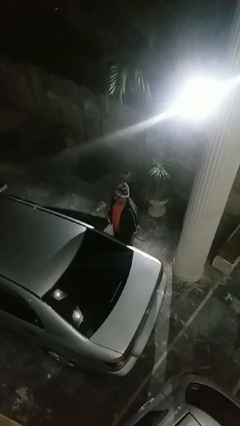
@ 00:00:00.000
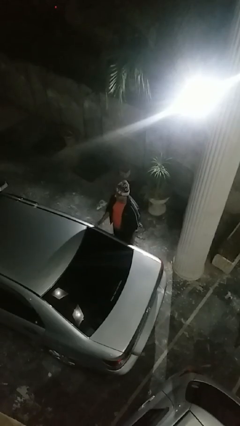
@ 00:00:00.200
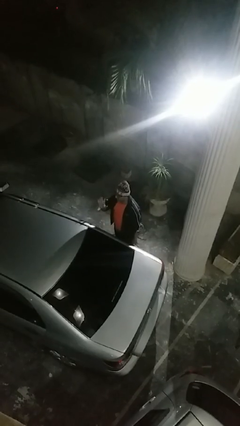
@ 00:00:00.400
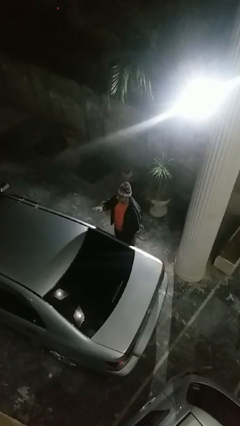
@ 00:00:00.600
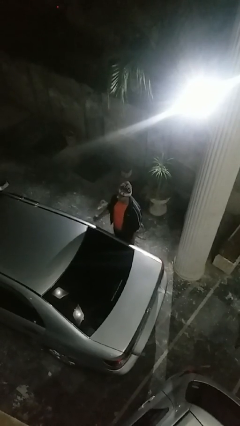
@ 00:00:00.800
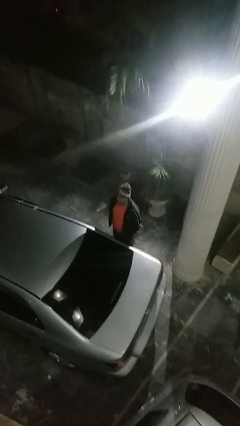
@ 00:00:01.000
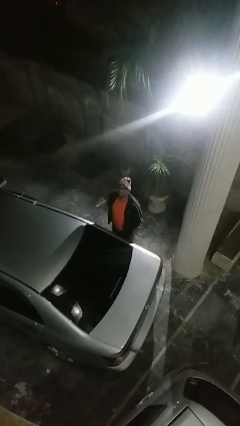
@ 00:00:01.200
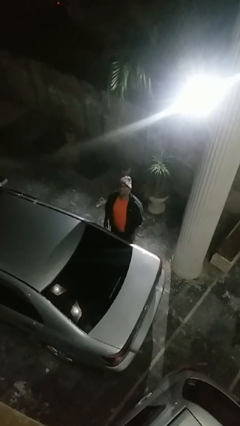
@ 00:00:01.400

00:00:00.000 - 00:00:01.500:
person closes car door

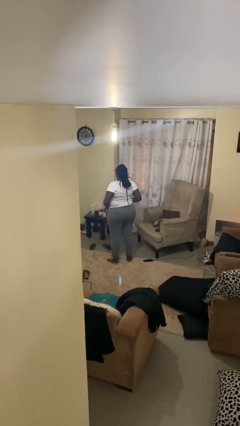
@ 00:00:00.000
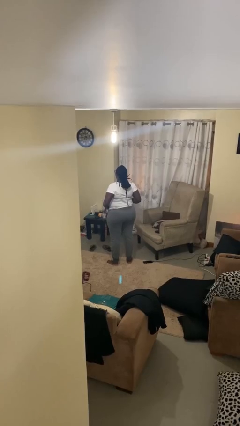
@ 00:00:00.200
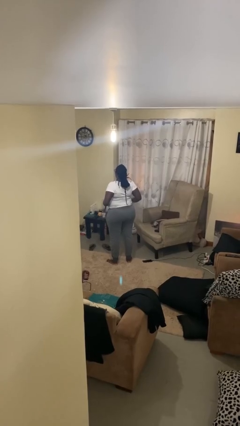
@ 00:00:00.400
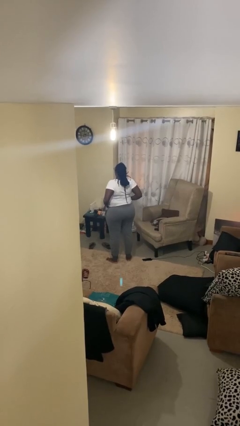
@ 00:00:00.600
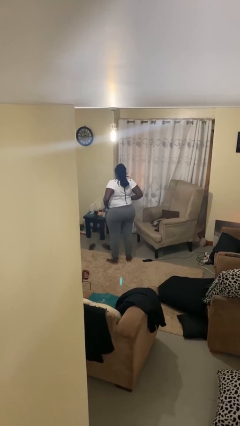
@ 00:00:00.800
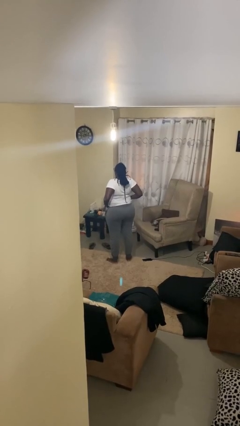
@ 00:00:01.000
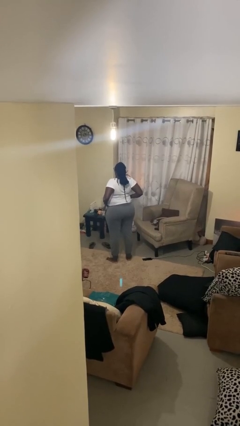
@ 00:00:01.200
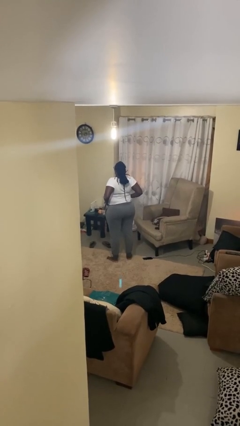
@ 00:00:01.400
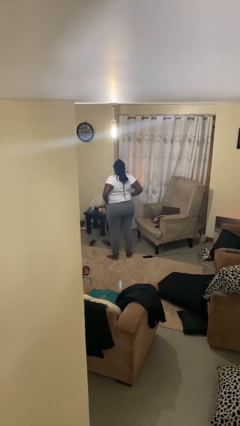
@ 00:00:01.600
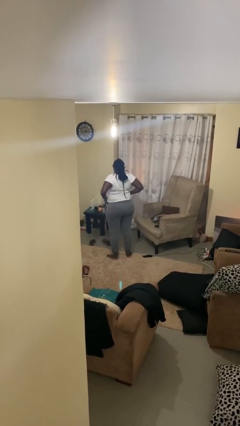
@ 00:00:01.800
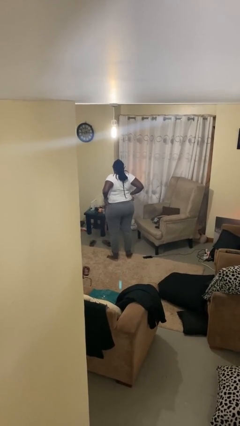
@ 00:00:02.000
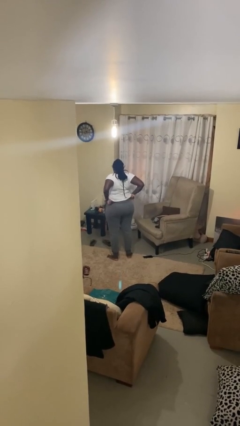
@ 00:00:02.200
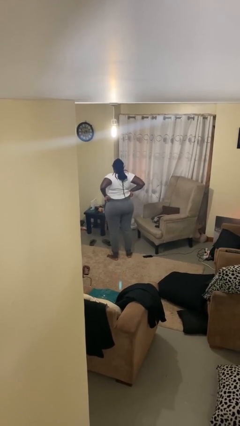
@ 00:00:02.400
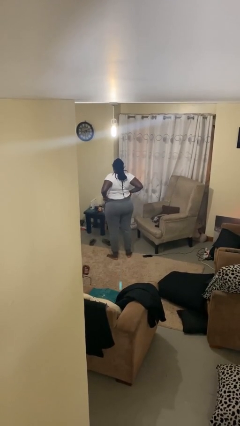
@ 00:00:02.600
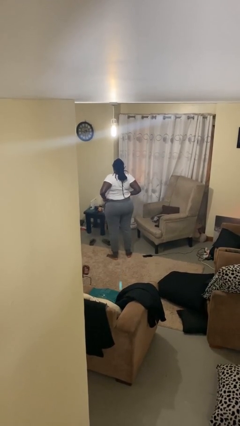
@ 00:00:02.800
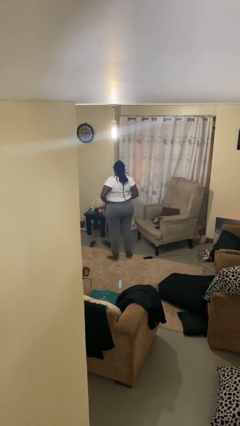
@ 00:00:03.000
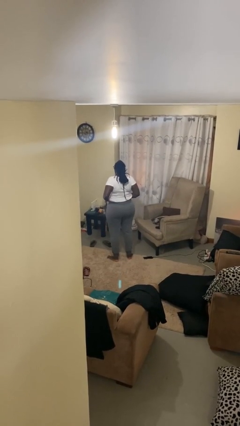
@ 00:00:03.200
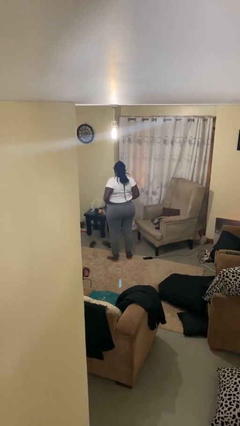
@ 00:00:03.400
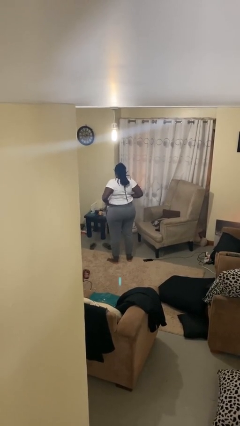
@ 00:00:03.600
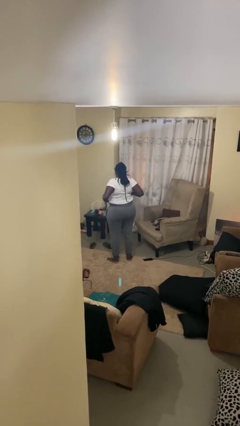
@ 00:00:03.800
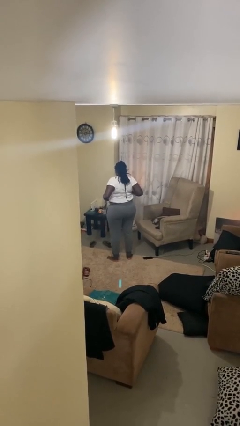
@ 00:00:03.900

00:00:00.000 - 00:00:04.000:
person hikes up pants

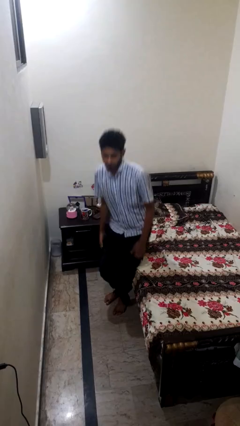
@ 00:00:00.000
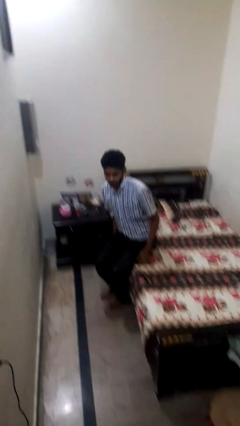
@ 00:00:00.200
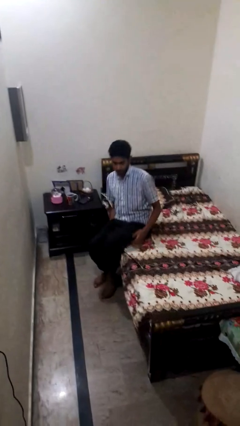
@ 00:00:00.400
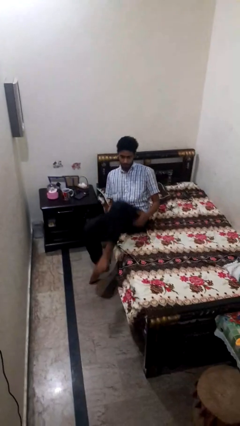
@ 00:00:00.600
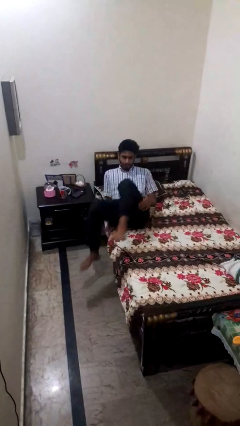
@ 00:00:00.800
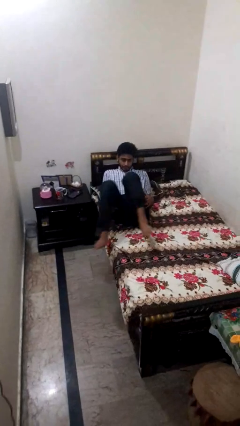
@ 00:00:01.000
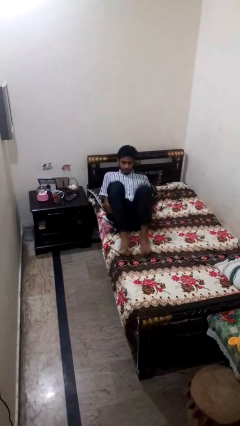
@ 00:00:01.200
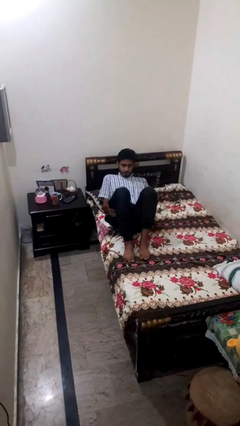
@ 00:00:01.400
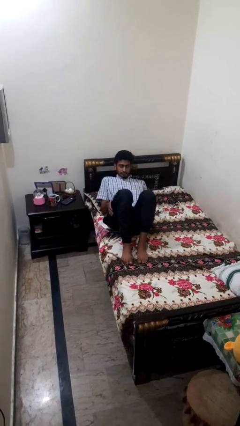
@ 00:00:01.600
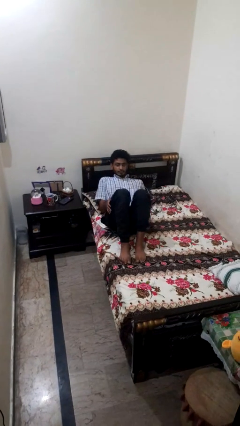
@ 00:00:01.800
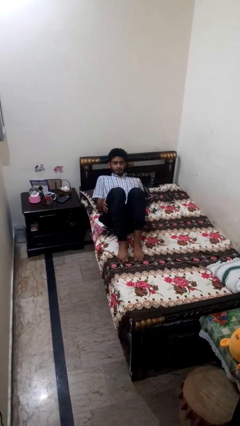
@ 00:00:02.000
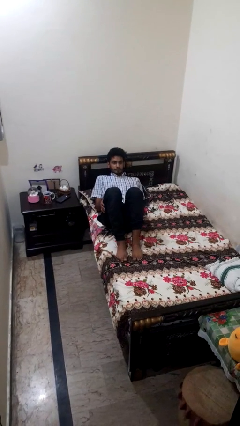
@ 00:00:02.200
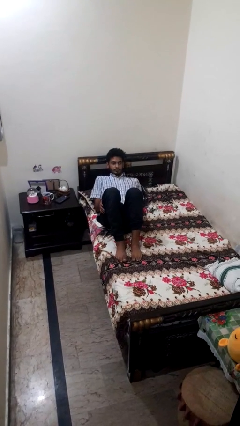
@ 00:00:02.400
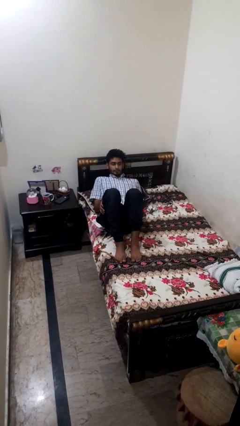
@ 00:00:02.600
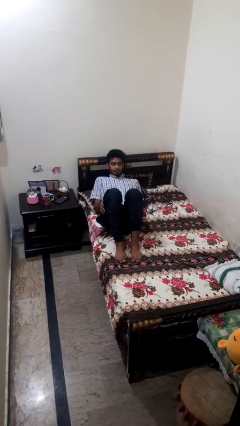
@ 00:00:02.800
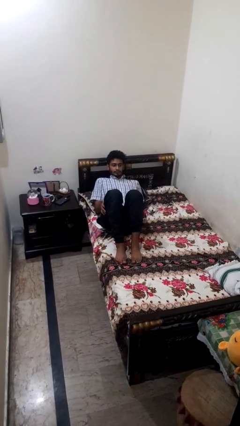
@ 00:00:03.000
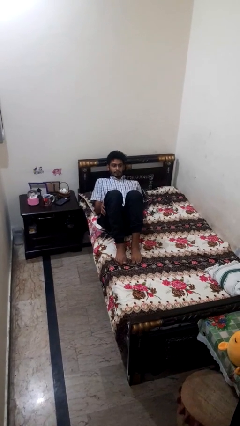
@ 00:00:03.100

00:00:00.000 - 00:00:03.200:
person lies down on bed

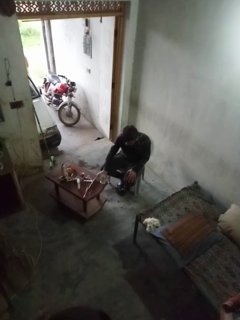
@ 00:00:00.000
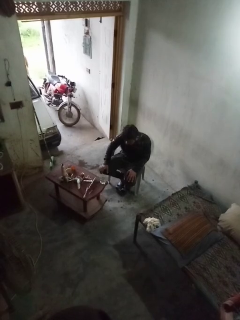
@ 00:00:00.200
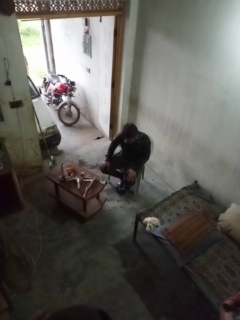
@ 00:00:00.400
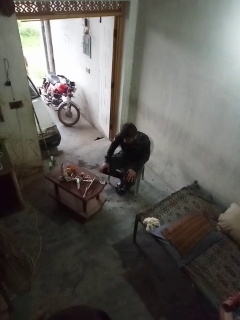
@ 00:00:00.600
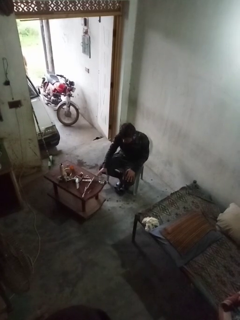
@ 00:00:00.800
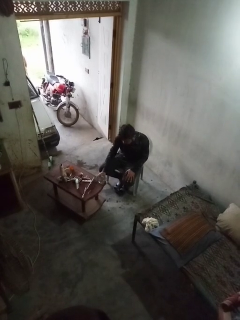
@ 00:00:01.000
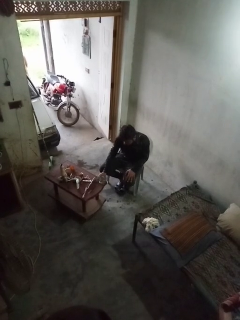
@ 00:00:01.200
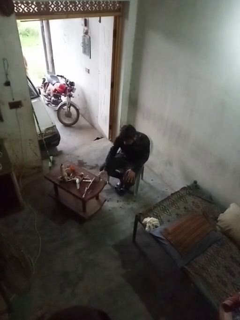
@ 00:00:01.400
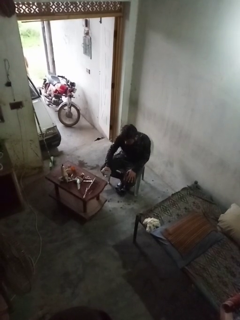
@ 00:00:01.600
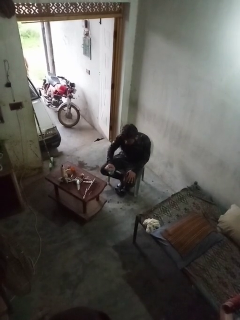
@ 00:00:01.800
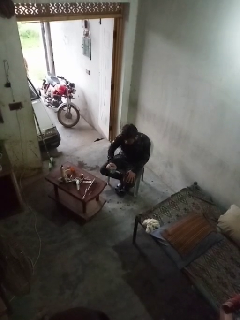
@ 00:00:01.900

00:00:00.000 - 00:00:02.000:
person picks up object from table

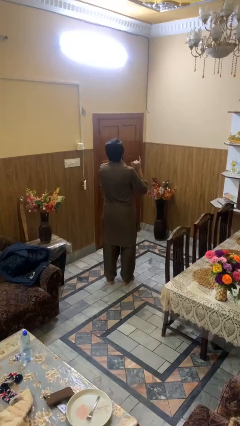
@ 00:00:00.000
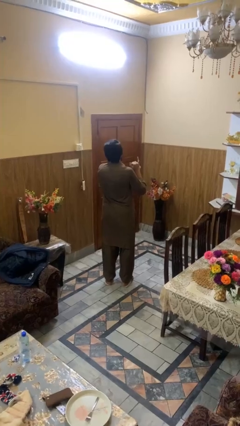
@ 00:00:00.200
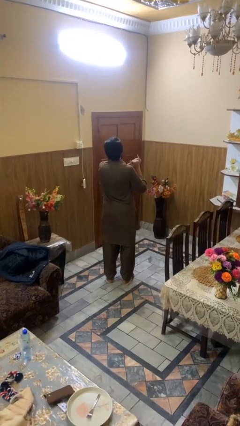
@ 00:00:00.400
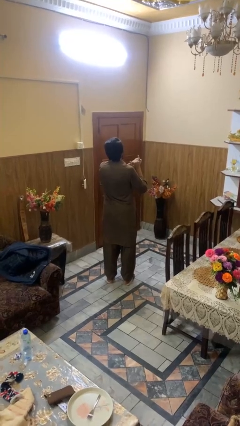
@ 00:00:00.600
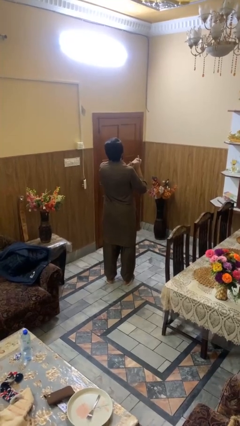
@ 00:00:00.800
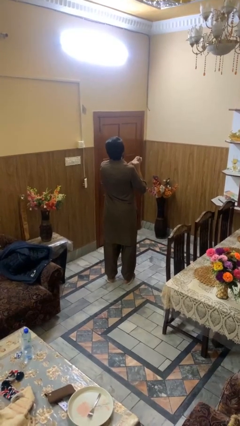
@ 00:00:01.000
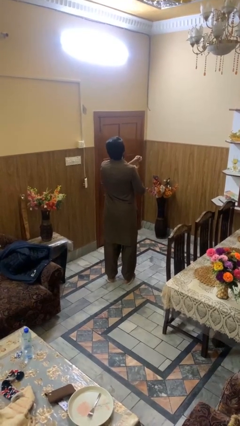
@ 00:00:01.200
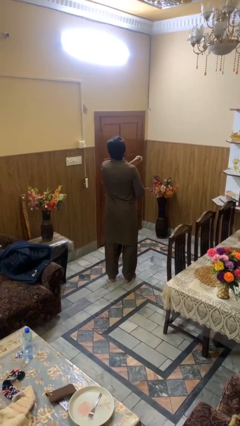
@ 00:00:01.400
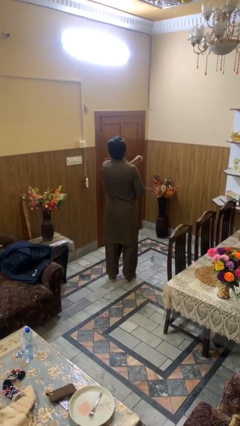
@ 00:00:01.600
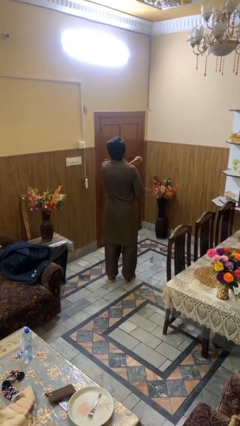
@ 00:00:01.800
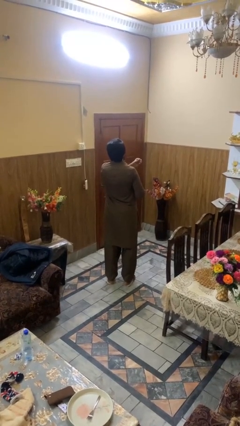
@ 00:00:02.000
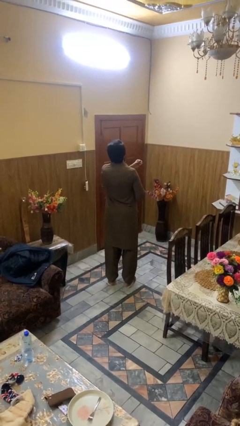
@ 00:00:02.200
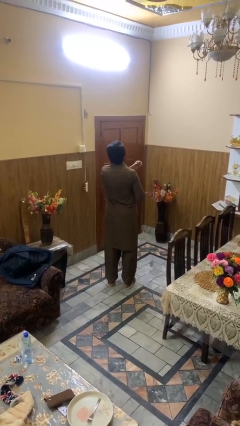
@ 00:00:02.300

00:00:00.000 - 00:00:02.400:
person takes off ring

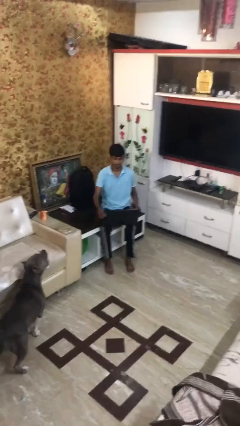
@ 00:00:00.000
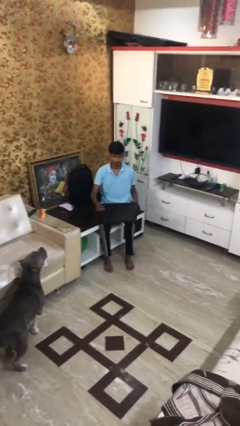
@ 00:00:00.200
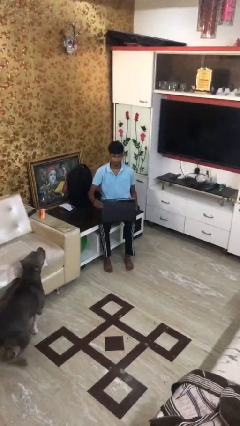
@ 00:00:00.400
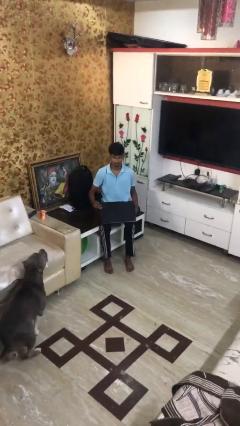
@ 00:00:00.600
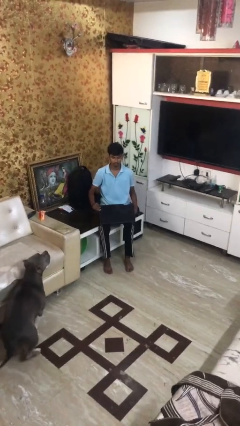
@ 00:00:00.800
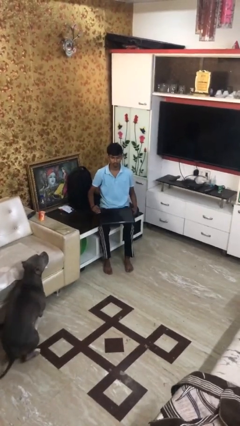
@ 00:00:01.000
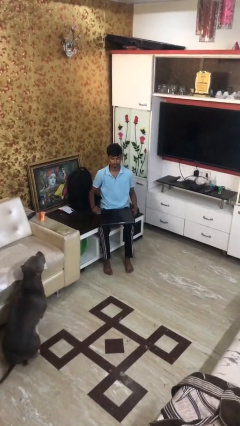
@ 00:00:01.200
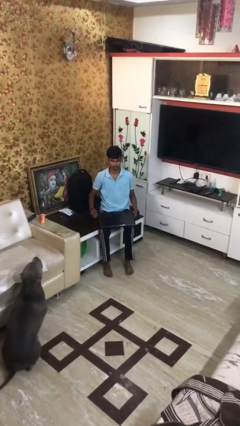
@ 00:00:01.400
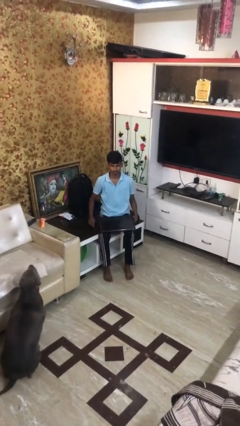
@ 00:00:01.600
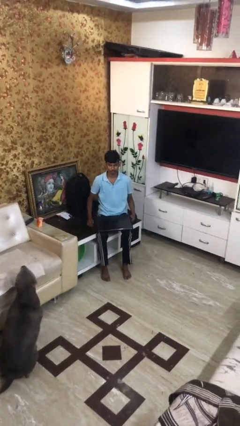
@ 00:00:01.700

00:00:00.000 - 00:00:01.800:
person closes laptop

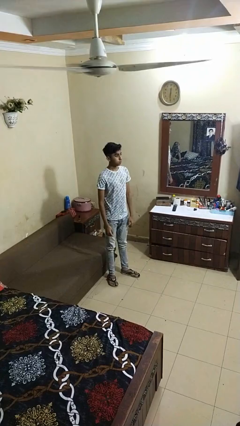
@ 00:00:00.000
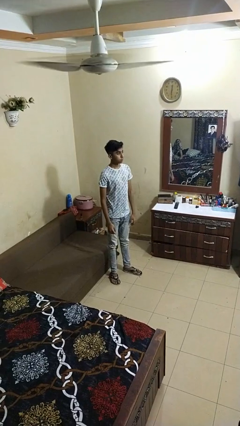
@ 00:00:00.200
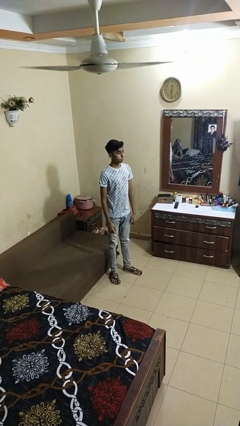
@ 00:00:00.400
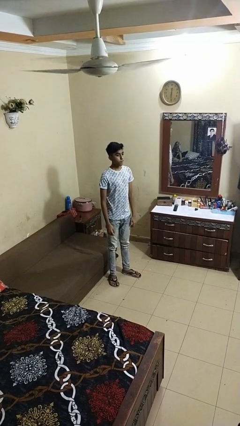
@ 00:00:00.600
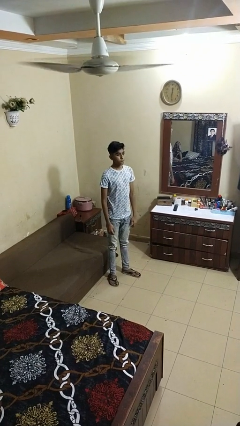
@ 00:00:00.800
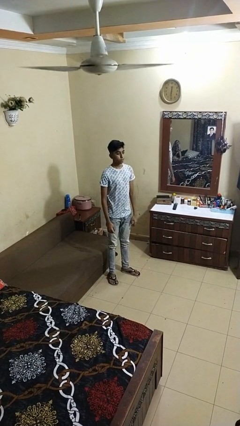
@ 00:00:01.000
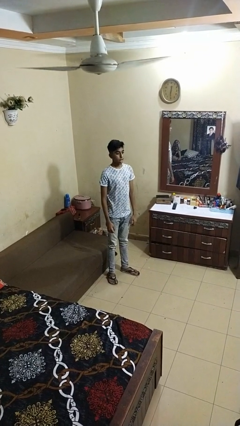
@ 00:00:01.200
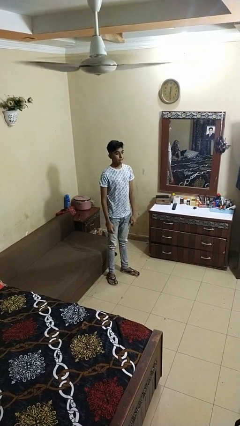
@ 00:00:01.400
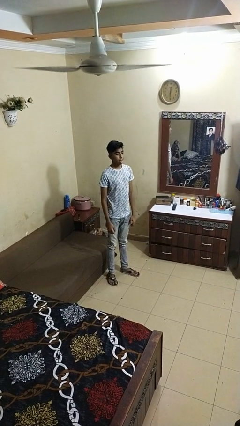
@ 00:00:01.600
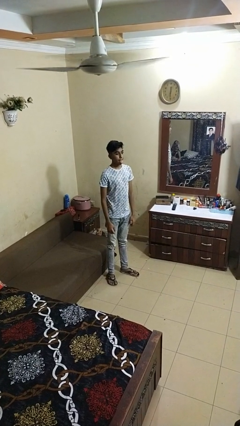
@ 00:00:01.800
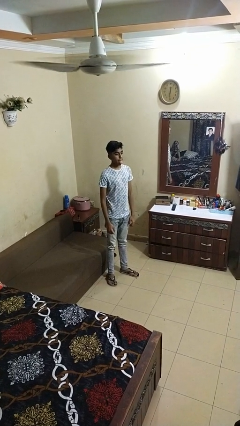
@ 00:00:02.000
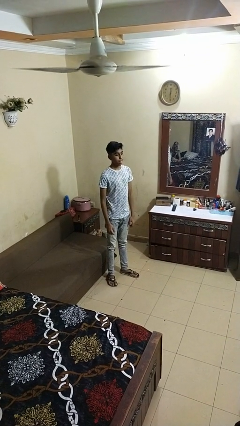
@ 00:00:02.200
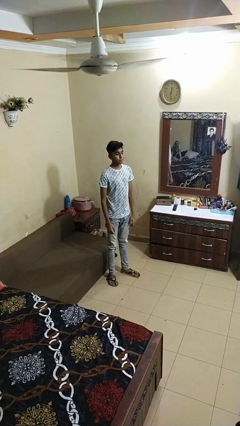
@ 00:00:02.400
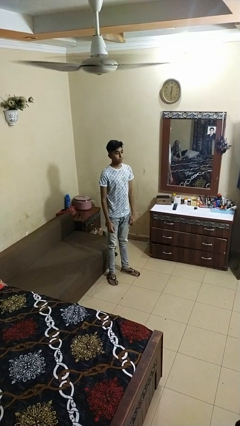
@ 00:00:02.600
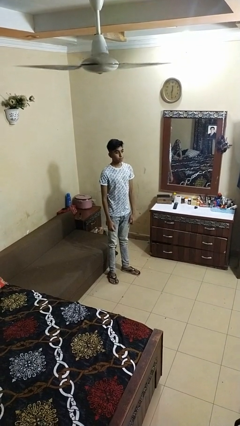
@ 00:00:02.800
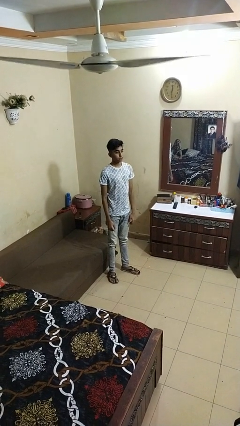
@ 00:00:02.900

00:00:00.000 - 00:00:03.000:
person sticks out tongue
